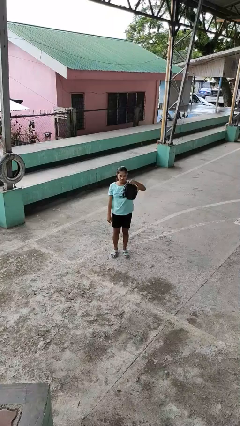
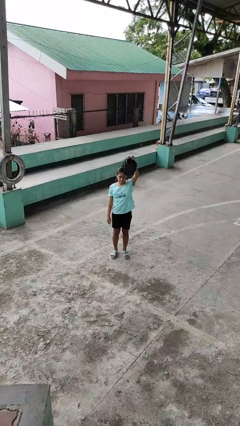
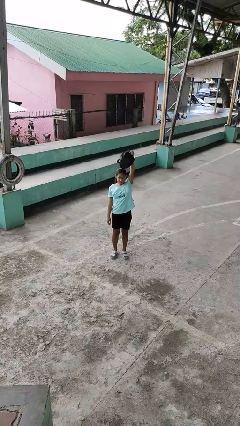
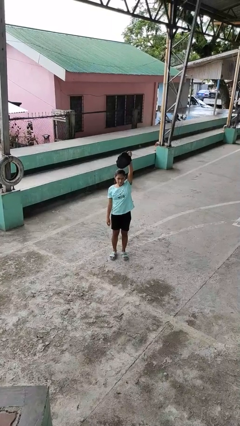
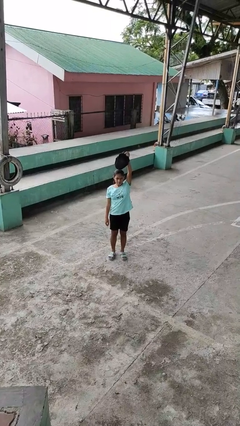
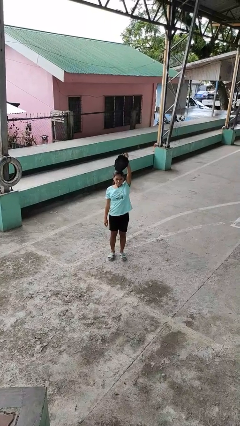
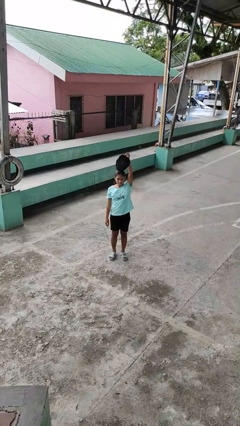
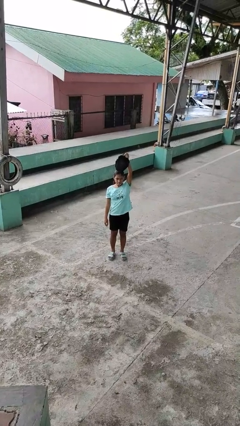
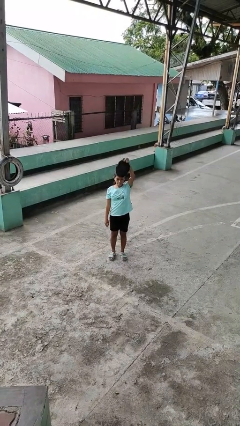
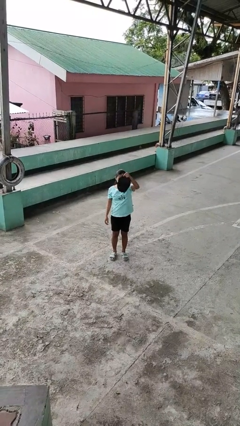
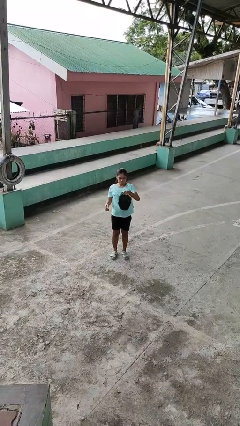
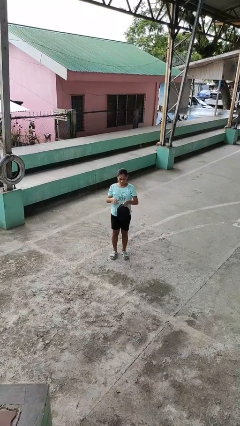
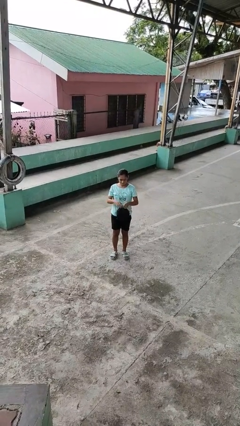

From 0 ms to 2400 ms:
person holds object above head

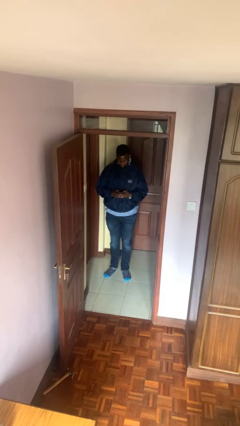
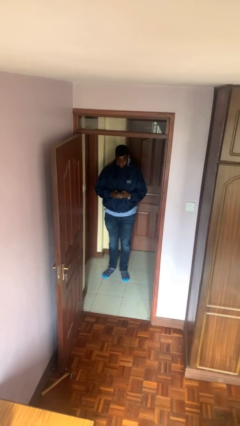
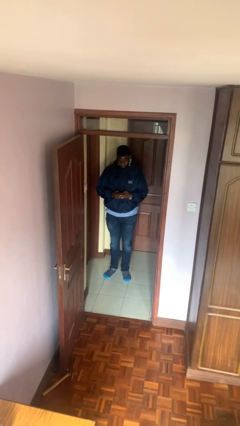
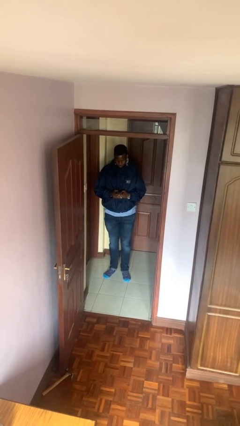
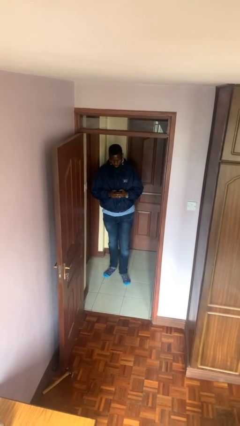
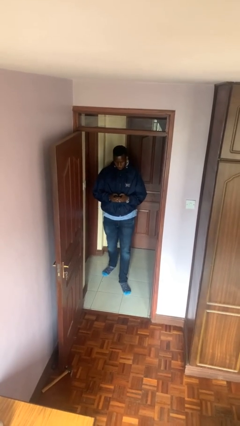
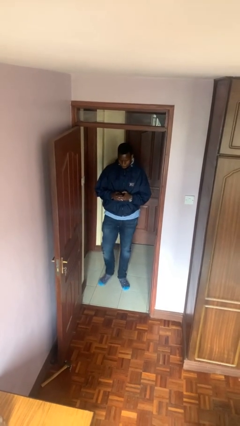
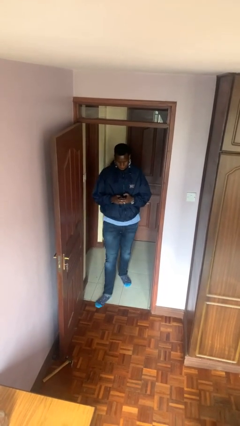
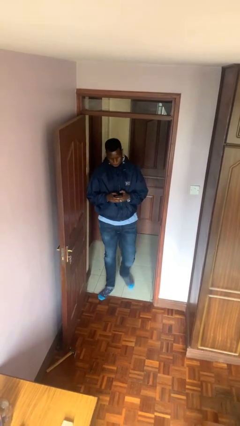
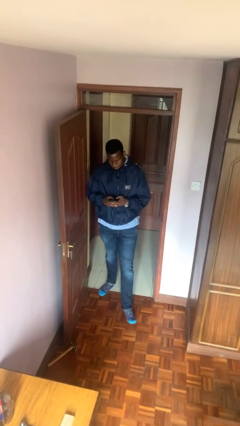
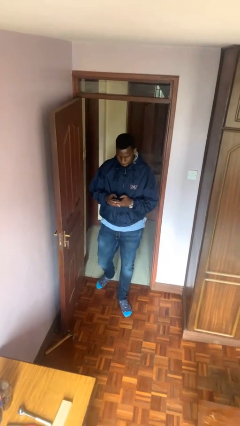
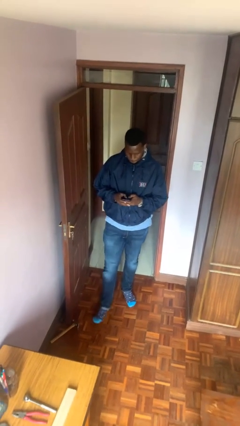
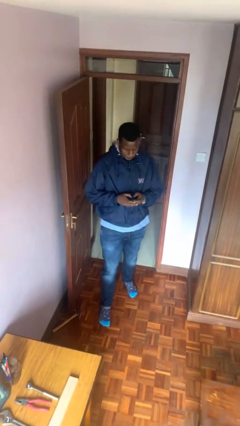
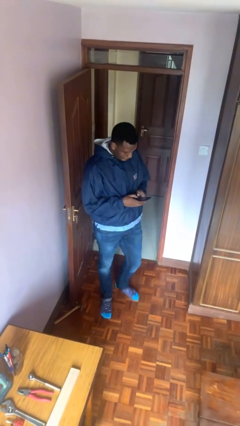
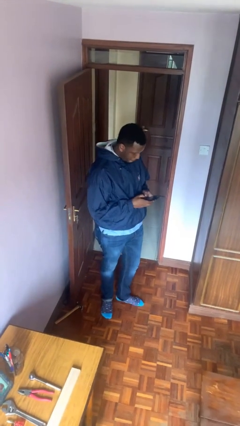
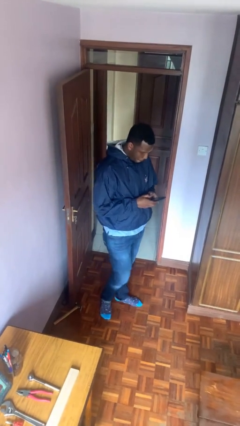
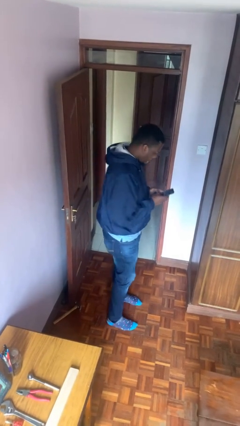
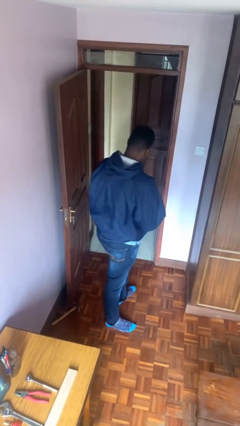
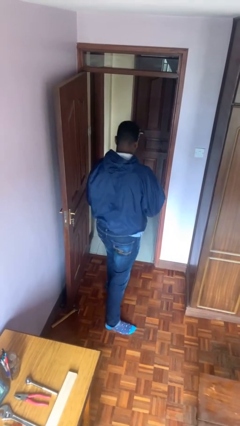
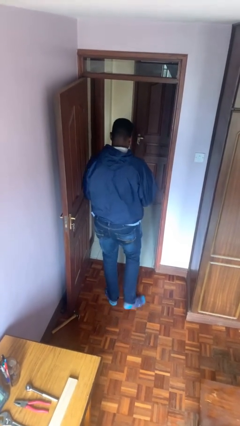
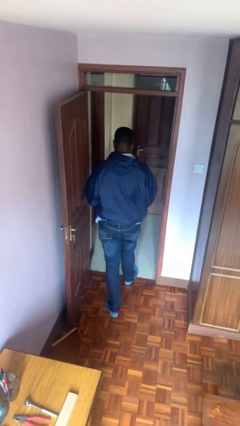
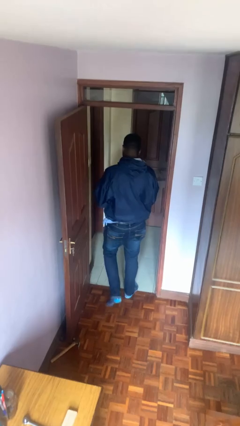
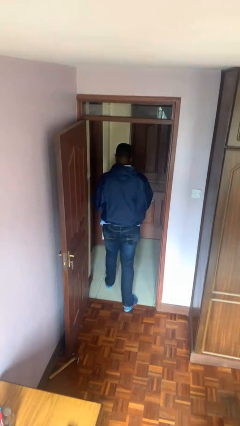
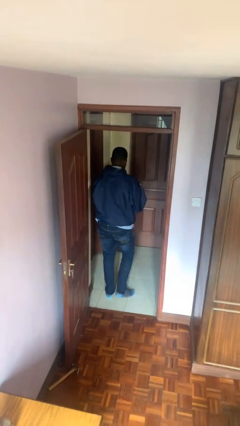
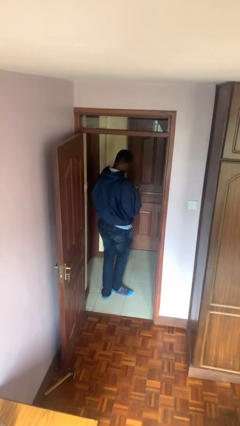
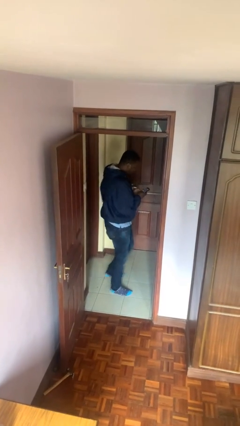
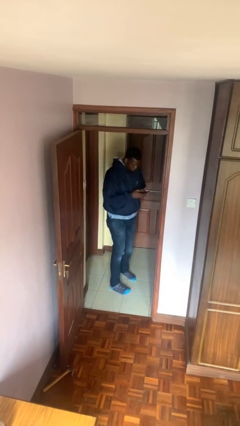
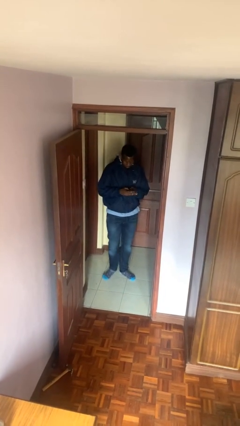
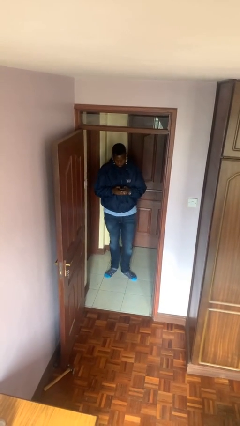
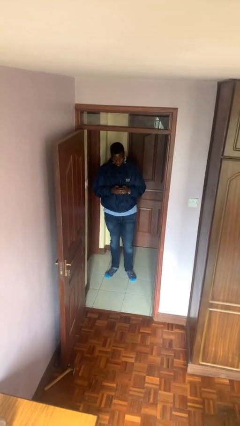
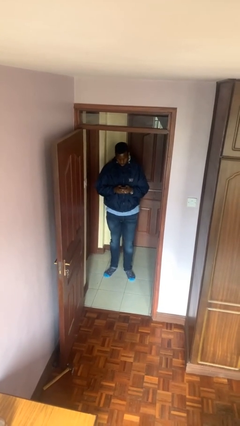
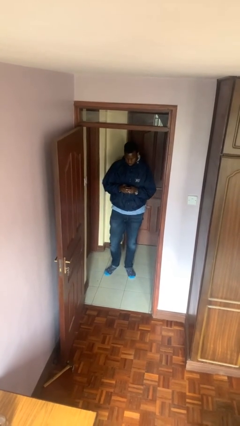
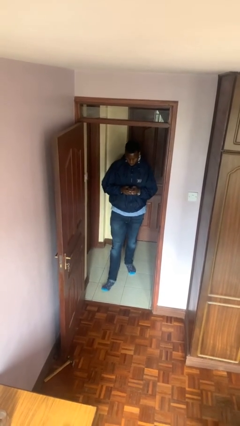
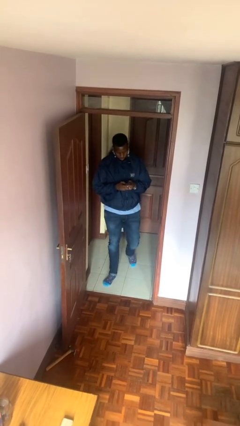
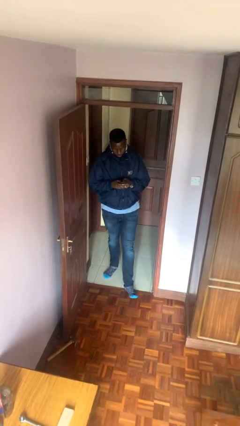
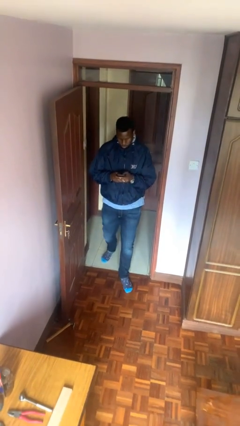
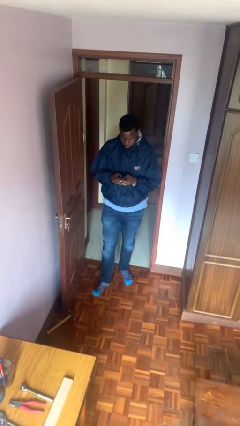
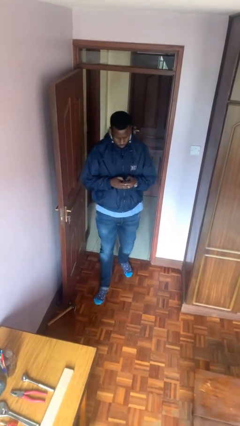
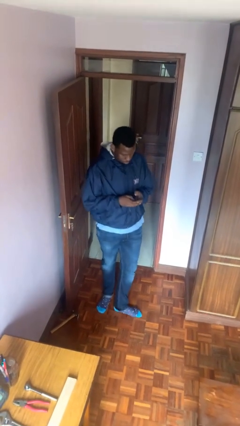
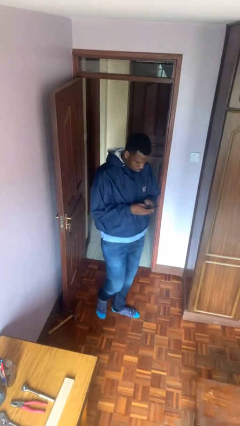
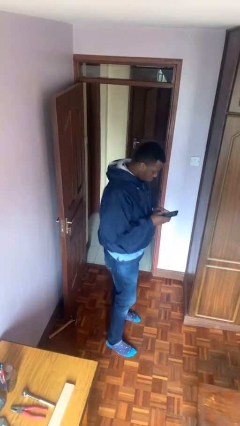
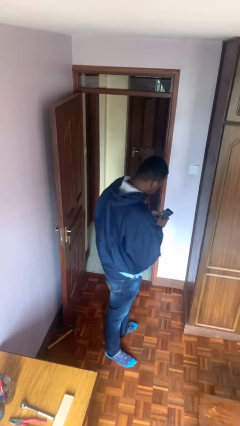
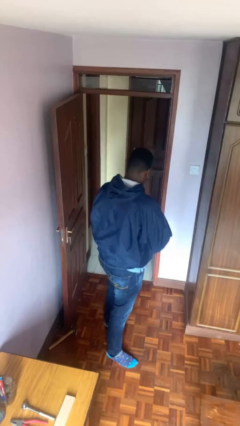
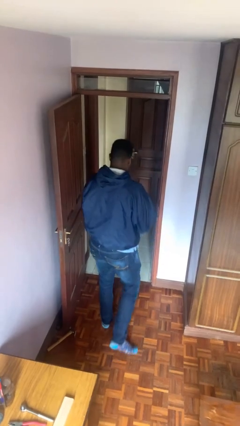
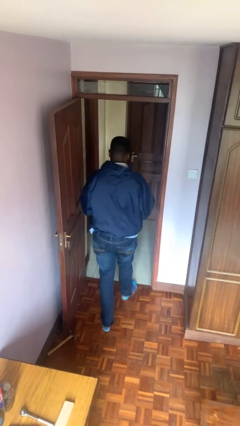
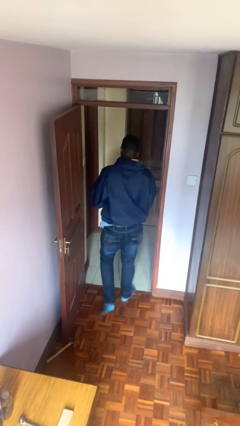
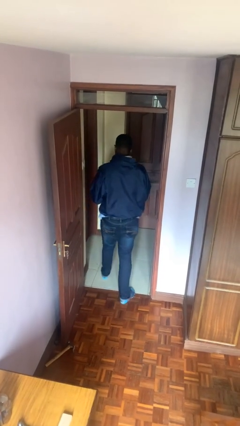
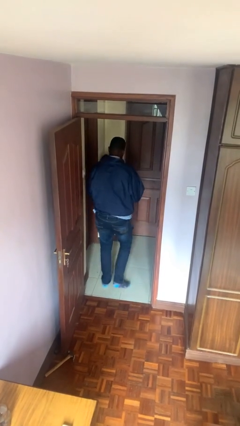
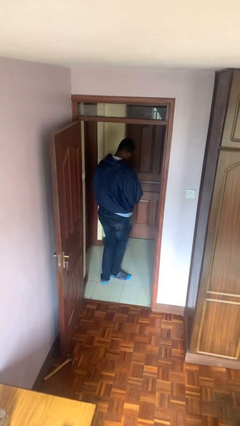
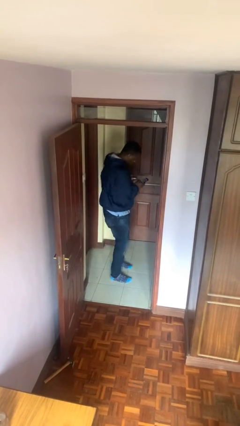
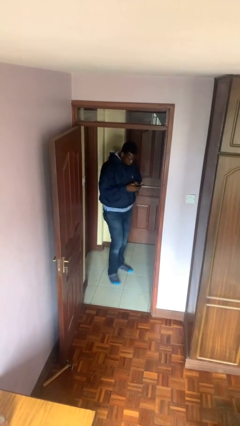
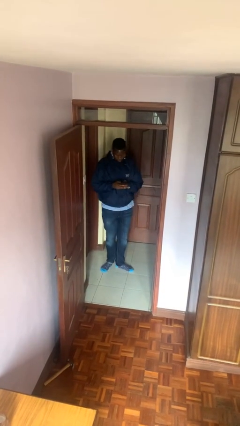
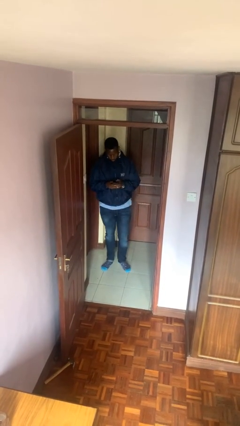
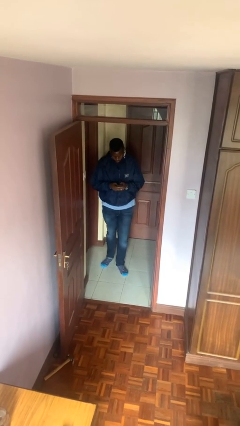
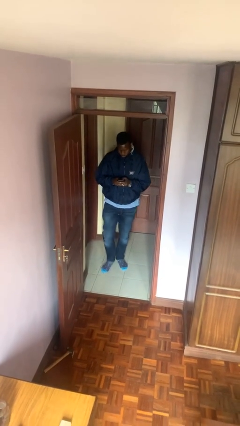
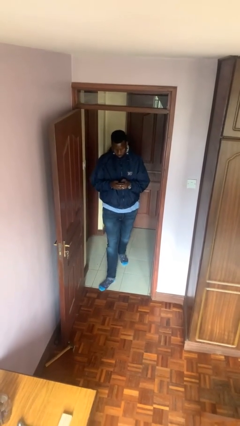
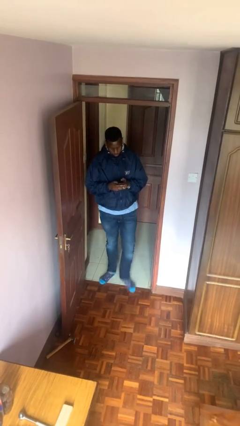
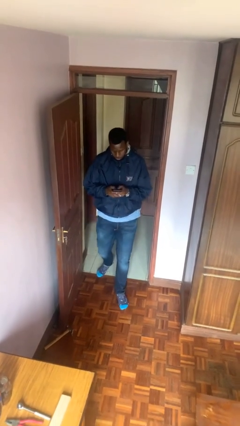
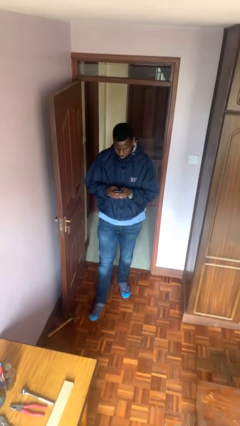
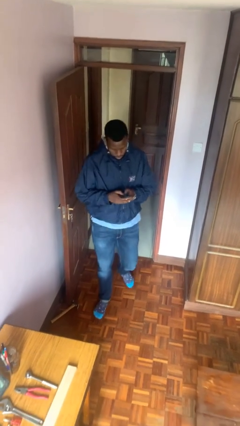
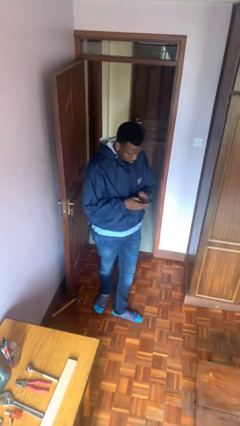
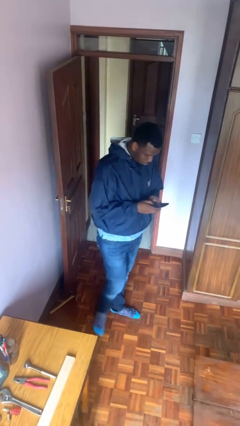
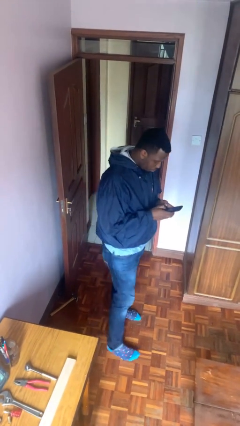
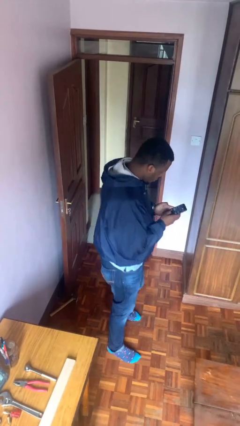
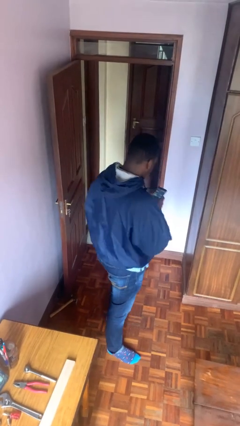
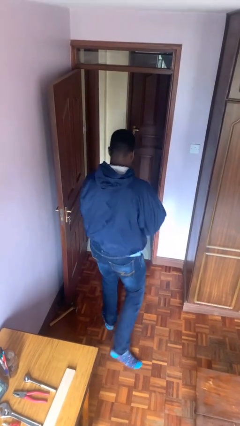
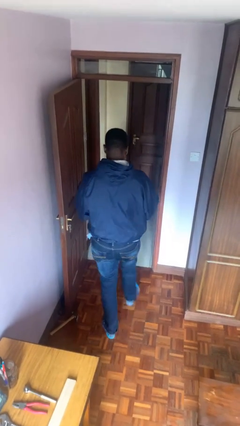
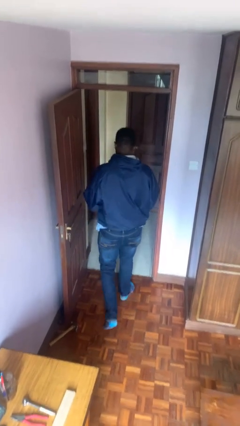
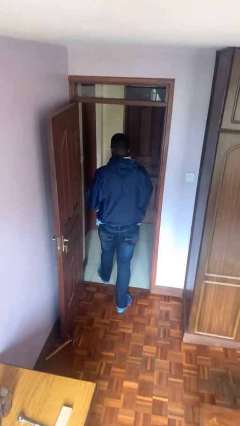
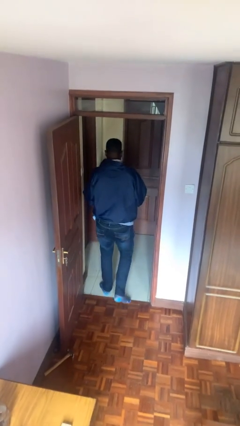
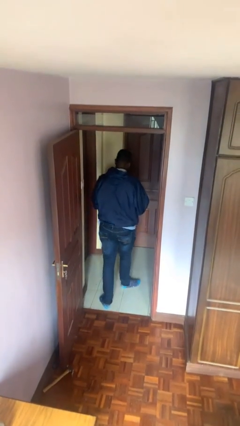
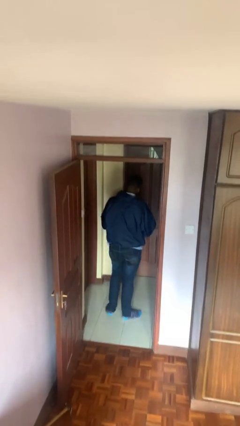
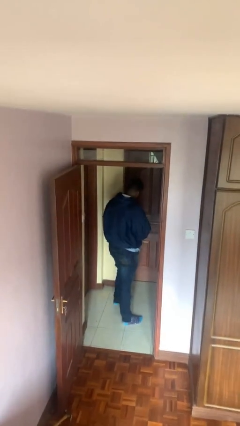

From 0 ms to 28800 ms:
person texts on phone

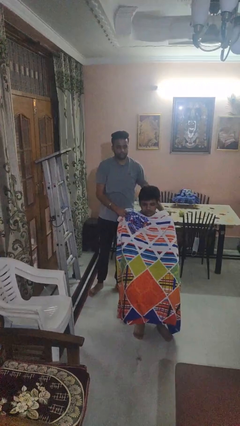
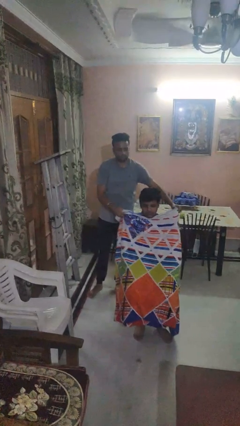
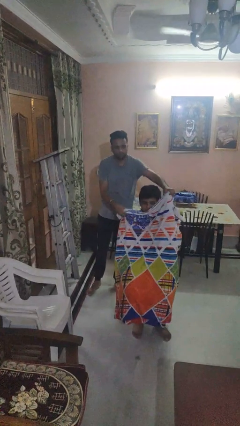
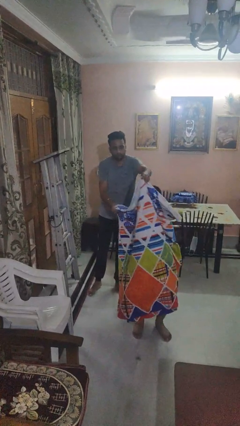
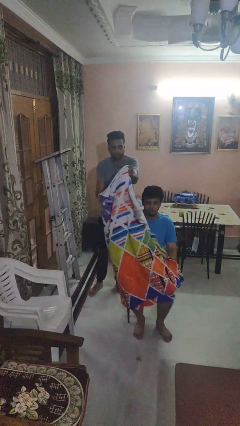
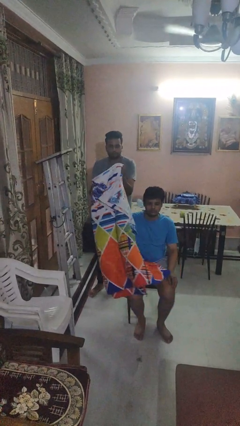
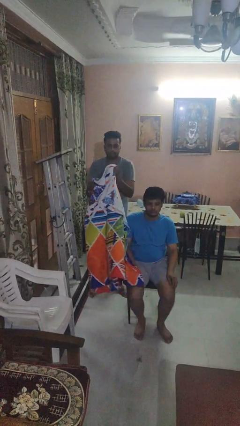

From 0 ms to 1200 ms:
person uncovers friend with blanket
